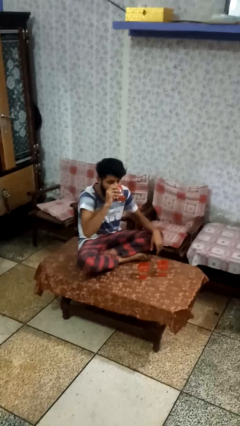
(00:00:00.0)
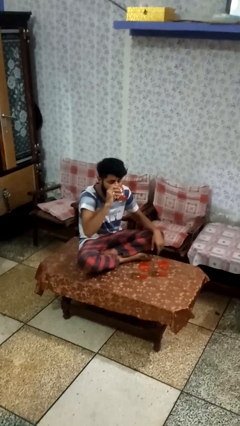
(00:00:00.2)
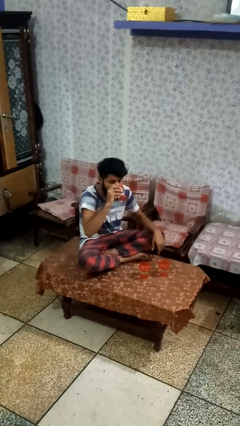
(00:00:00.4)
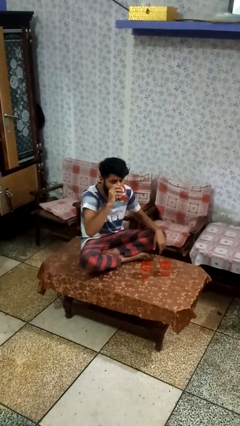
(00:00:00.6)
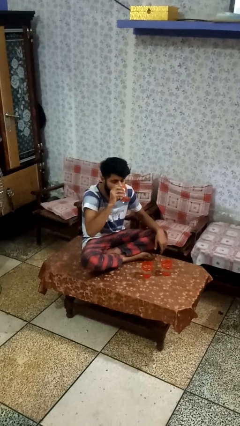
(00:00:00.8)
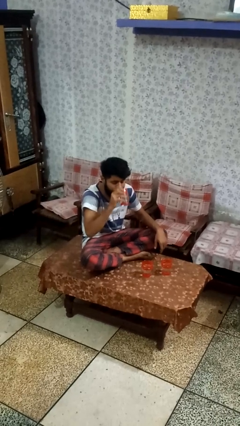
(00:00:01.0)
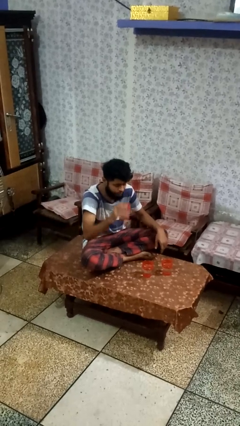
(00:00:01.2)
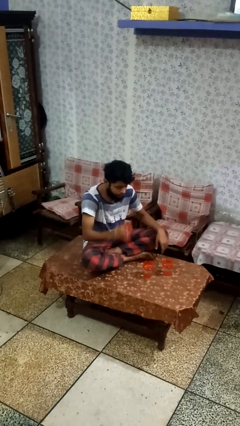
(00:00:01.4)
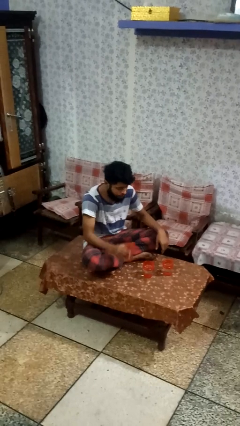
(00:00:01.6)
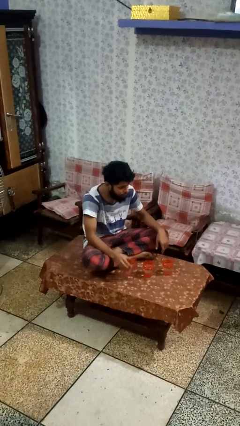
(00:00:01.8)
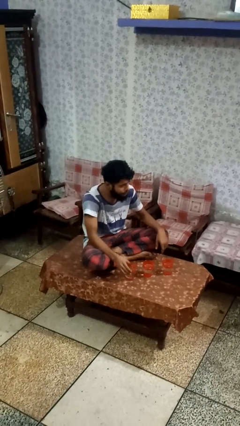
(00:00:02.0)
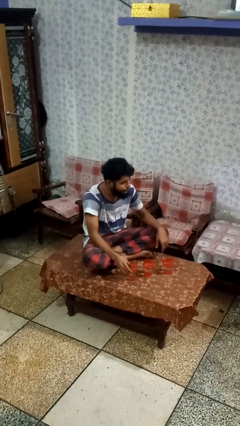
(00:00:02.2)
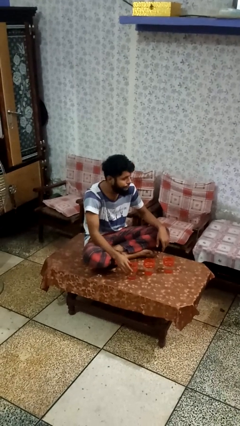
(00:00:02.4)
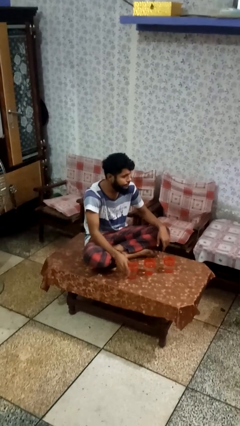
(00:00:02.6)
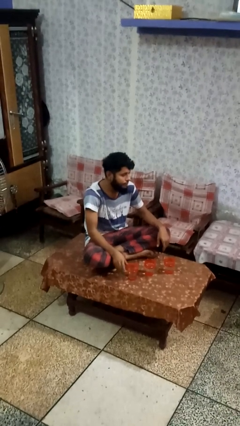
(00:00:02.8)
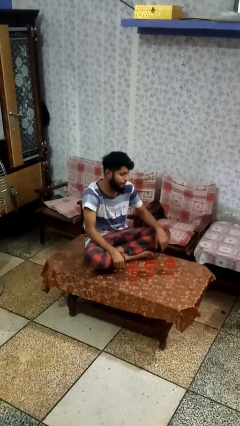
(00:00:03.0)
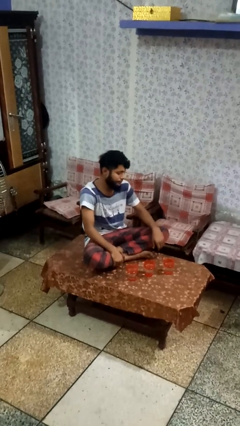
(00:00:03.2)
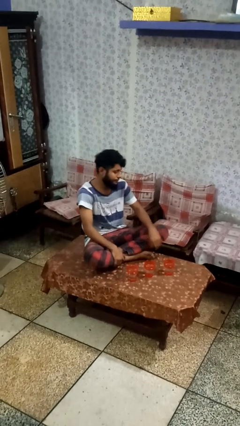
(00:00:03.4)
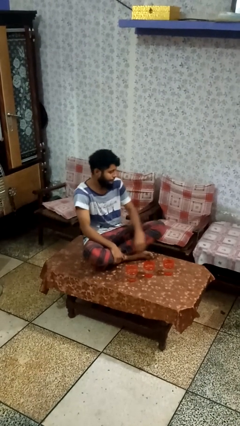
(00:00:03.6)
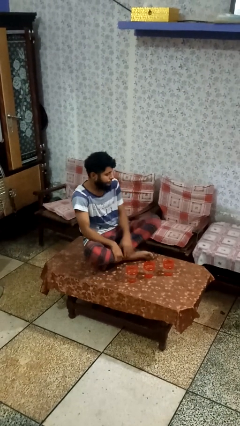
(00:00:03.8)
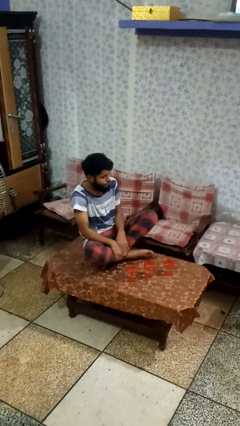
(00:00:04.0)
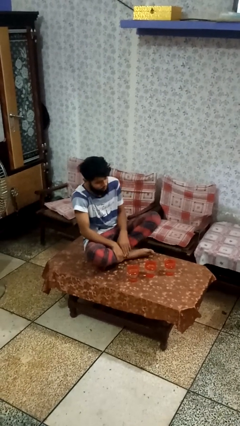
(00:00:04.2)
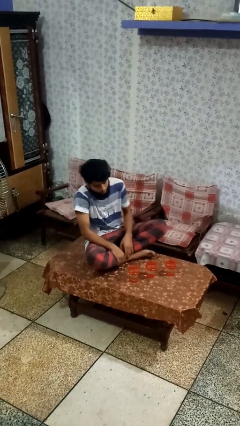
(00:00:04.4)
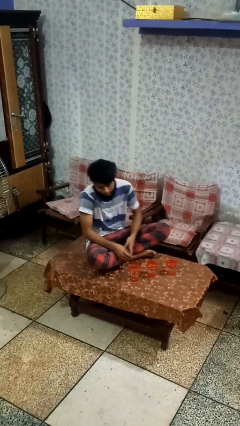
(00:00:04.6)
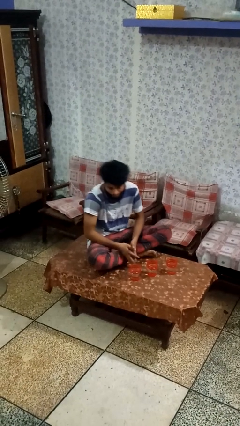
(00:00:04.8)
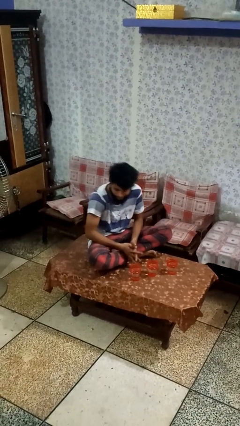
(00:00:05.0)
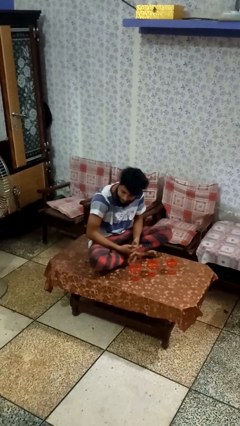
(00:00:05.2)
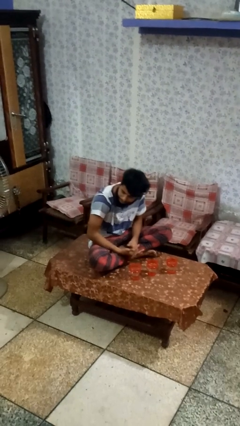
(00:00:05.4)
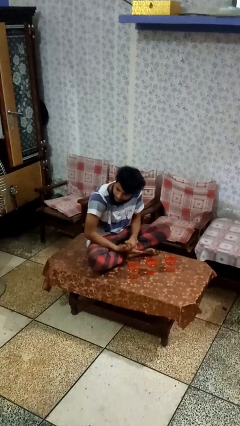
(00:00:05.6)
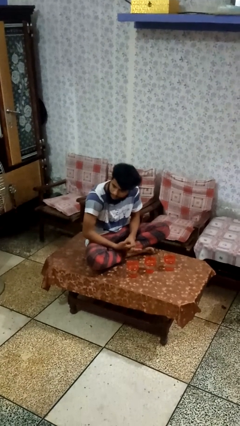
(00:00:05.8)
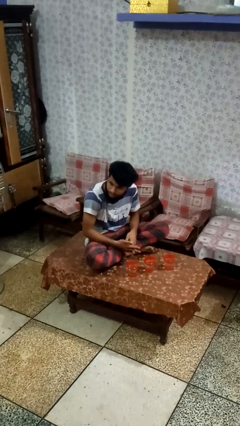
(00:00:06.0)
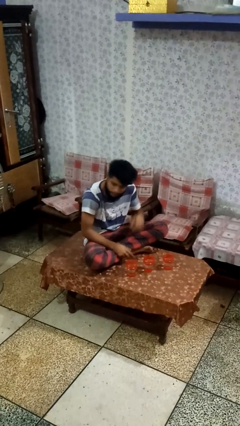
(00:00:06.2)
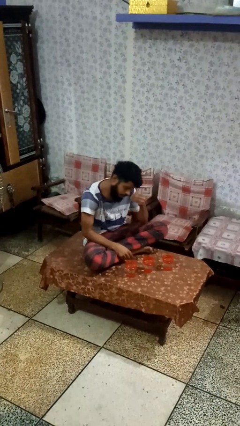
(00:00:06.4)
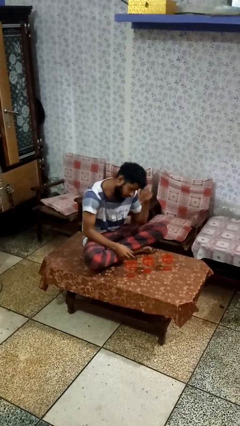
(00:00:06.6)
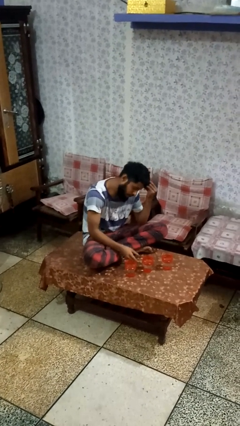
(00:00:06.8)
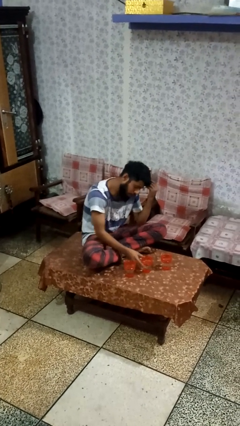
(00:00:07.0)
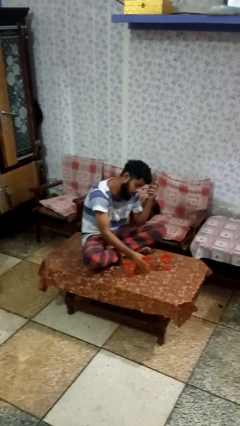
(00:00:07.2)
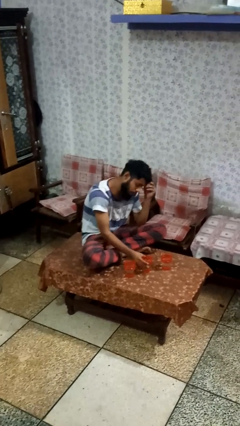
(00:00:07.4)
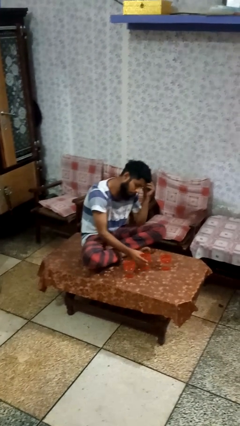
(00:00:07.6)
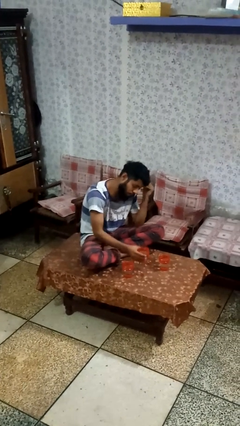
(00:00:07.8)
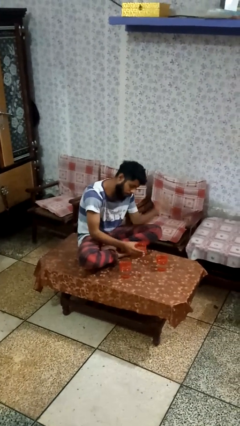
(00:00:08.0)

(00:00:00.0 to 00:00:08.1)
person puts down object on table

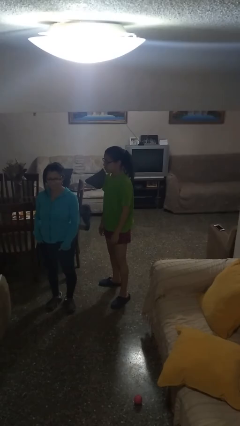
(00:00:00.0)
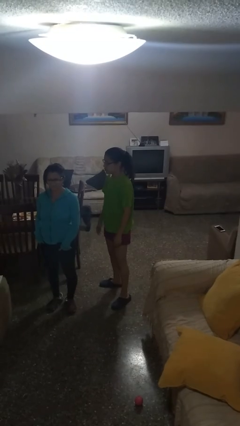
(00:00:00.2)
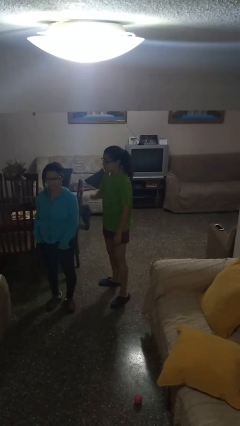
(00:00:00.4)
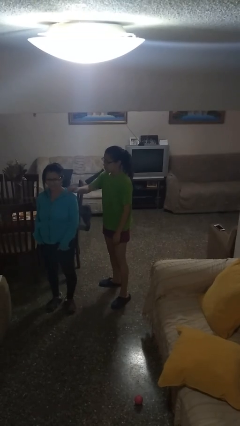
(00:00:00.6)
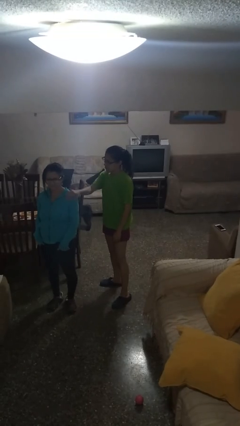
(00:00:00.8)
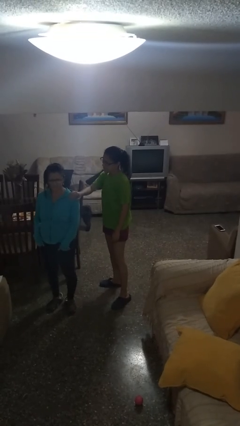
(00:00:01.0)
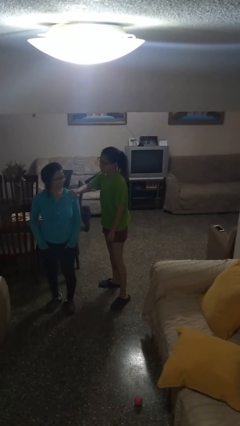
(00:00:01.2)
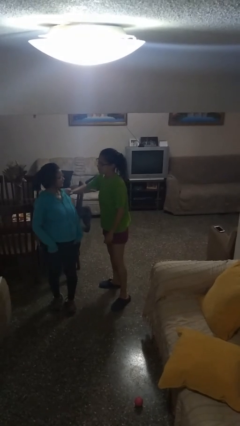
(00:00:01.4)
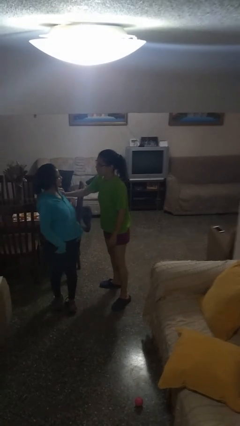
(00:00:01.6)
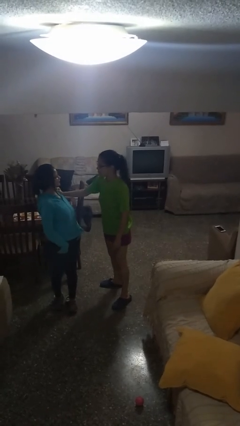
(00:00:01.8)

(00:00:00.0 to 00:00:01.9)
person grabs person by shoulder

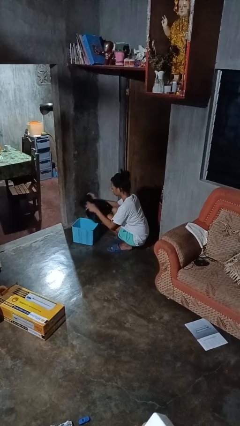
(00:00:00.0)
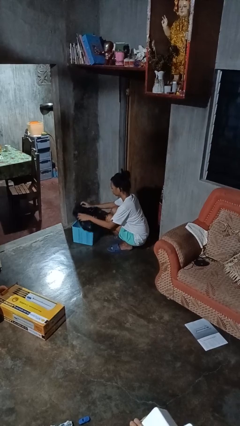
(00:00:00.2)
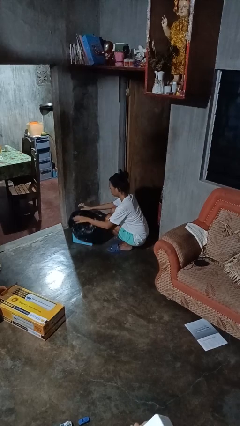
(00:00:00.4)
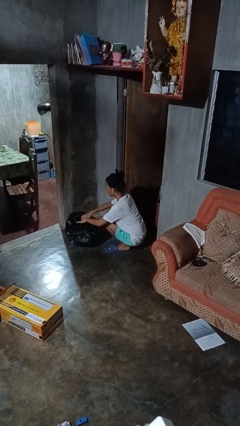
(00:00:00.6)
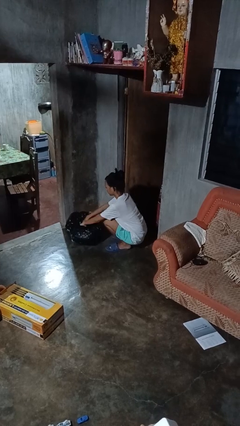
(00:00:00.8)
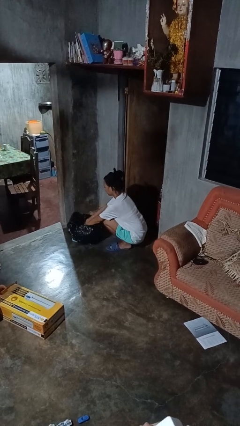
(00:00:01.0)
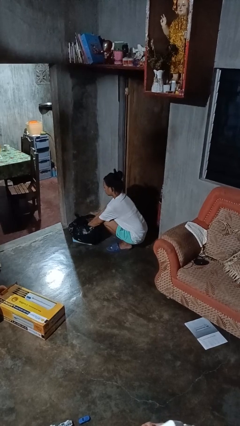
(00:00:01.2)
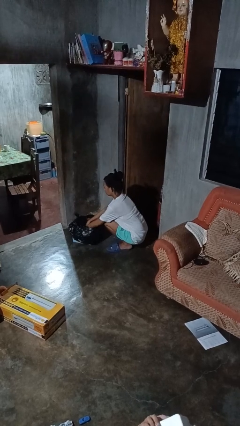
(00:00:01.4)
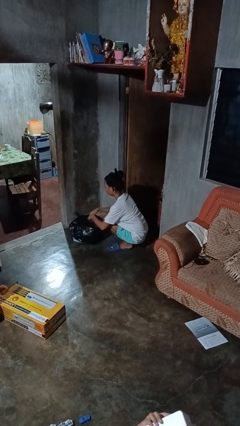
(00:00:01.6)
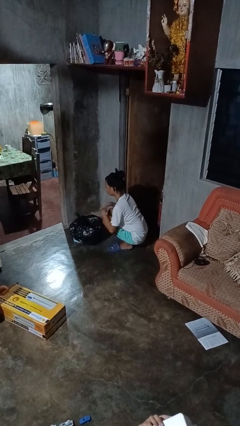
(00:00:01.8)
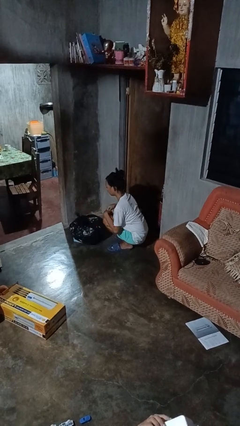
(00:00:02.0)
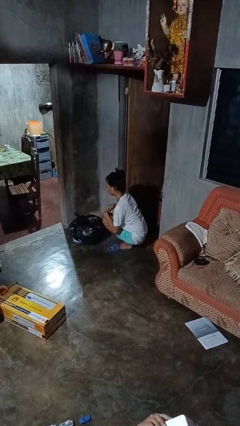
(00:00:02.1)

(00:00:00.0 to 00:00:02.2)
person inserts trashbag into trashcan

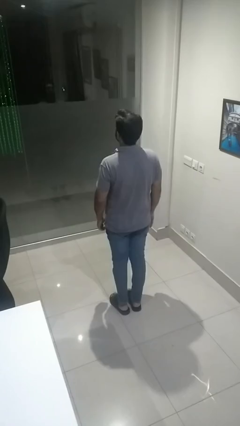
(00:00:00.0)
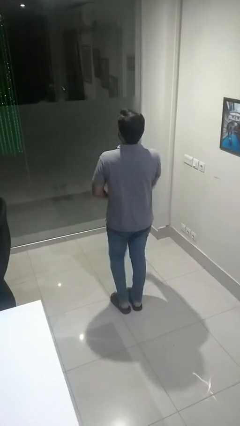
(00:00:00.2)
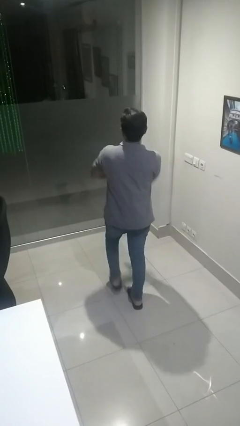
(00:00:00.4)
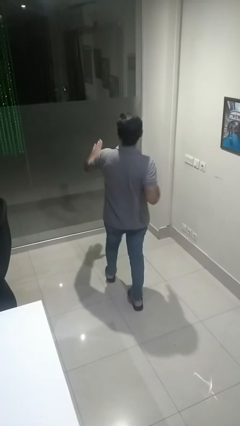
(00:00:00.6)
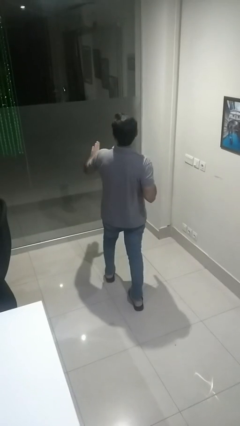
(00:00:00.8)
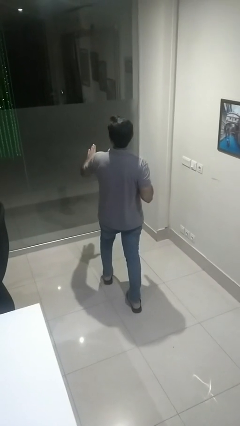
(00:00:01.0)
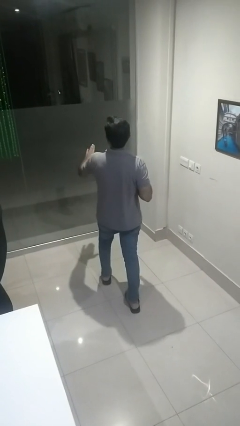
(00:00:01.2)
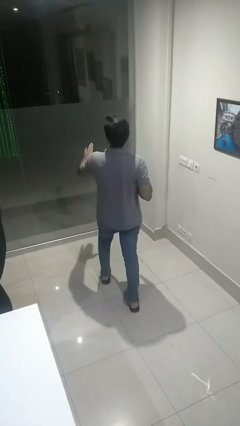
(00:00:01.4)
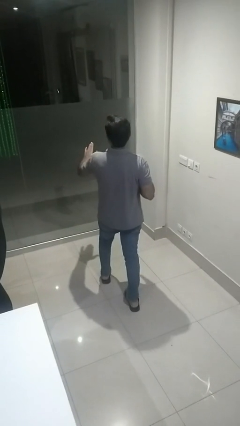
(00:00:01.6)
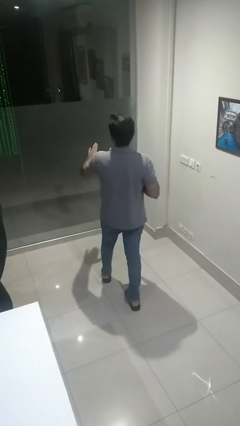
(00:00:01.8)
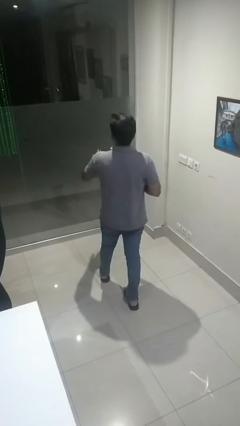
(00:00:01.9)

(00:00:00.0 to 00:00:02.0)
person karate chop

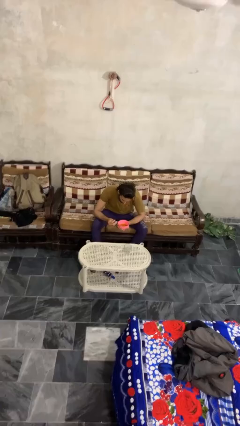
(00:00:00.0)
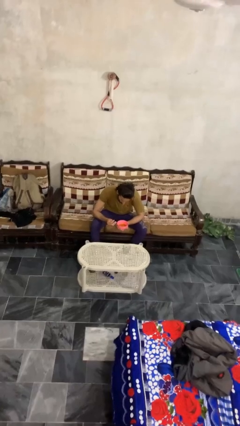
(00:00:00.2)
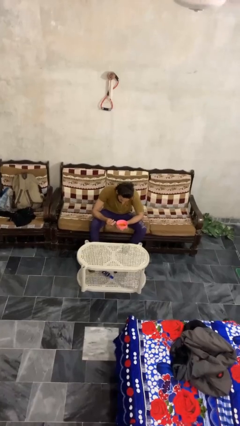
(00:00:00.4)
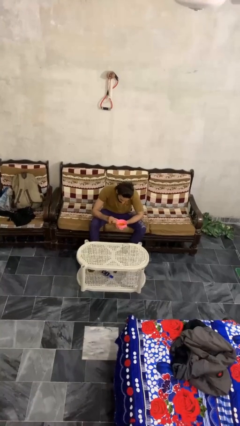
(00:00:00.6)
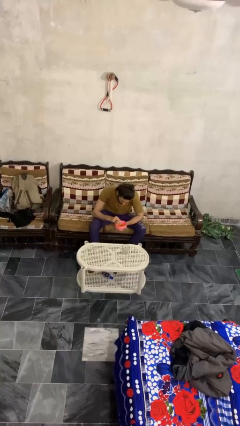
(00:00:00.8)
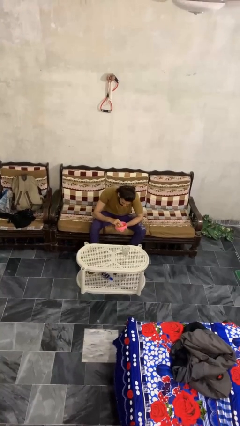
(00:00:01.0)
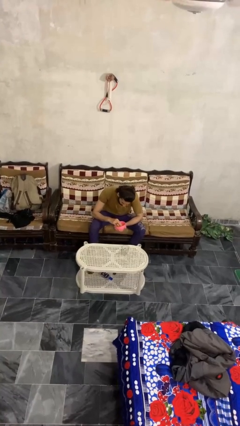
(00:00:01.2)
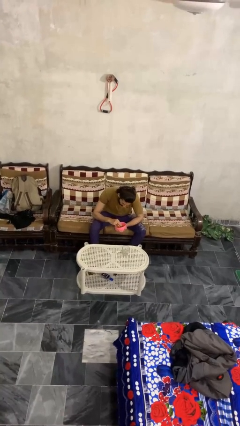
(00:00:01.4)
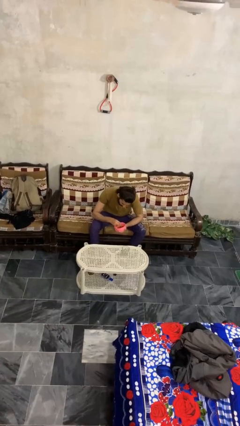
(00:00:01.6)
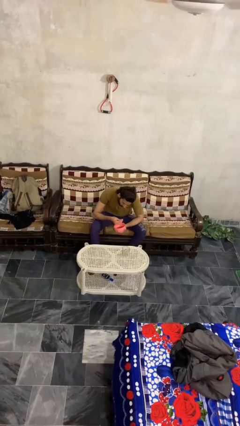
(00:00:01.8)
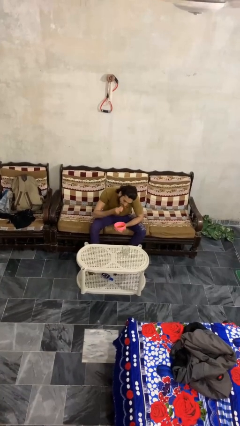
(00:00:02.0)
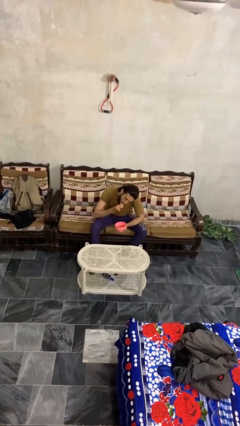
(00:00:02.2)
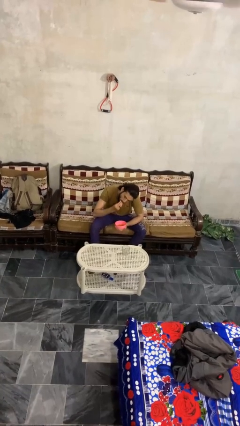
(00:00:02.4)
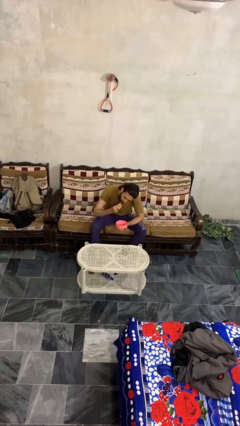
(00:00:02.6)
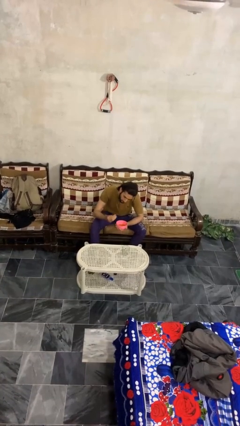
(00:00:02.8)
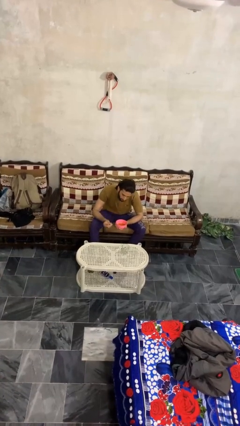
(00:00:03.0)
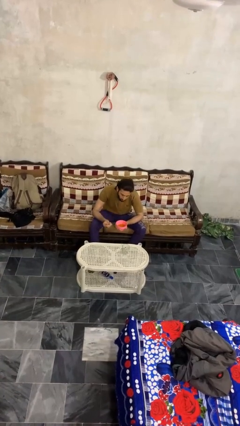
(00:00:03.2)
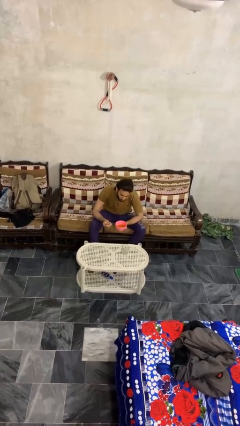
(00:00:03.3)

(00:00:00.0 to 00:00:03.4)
person eats with hands
